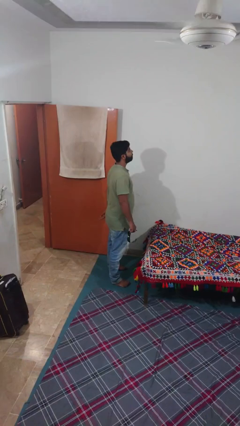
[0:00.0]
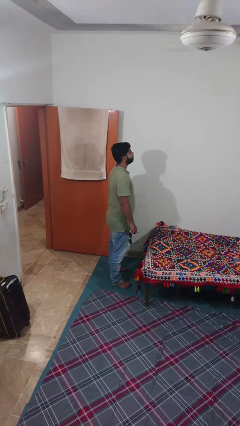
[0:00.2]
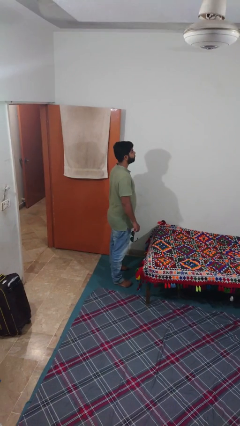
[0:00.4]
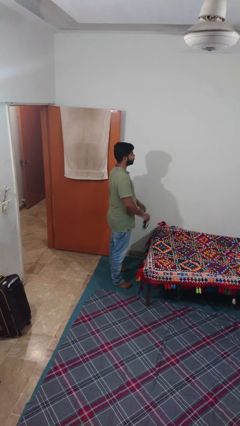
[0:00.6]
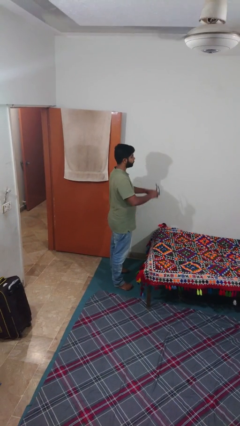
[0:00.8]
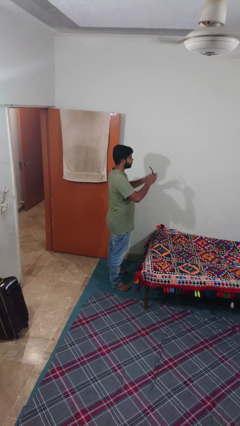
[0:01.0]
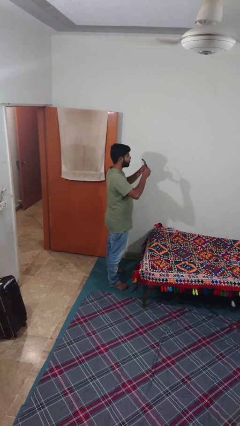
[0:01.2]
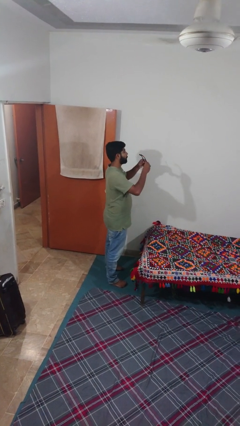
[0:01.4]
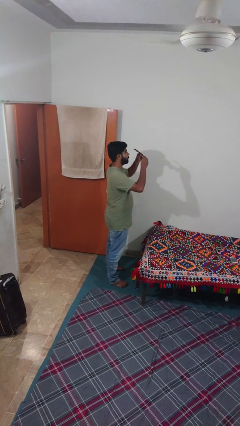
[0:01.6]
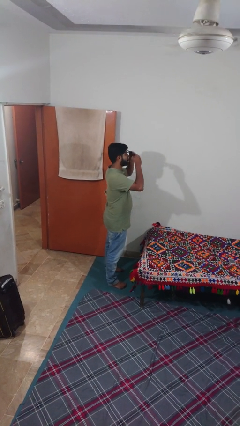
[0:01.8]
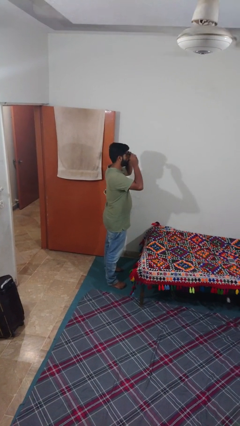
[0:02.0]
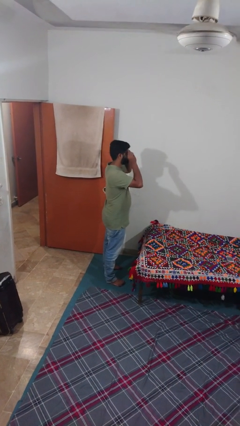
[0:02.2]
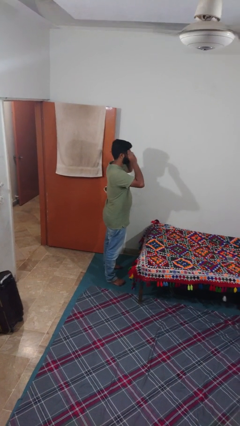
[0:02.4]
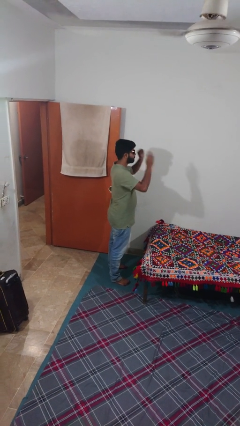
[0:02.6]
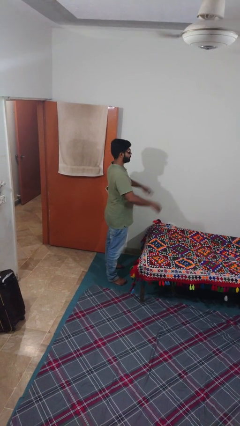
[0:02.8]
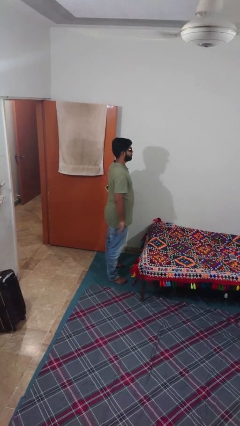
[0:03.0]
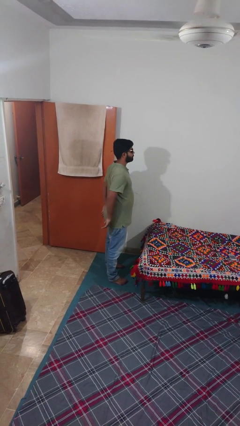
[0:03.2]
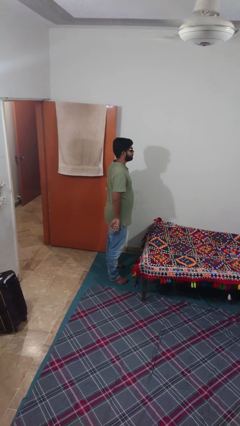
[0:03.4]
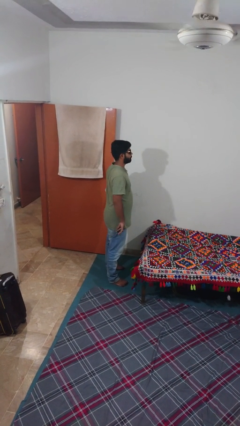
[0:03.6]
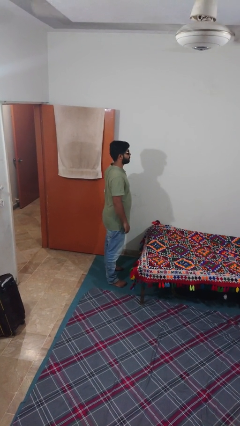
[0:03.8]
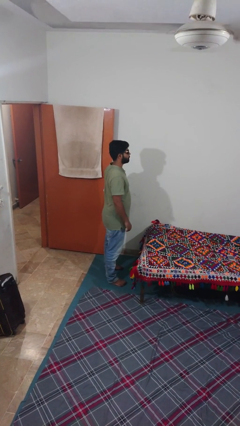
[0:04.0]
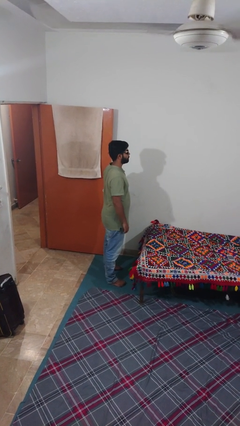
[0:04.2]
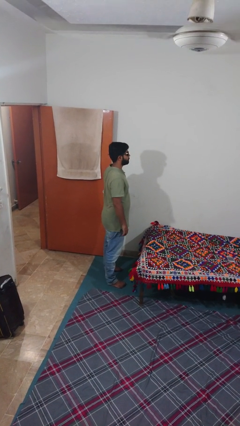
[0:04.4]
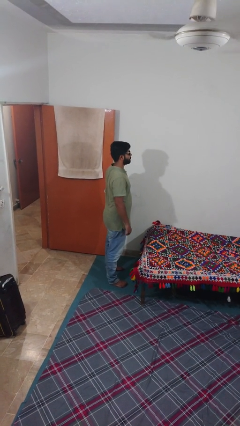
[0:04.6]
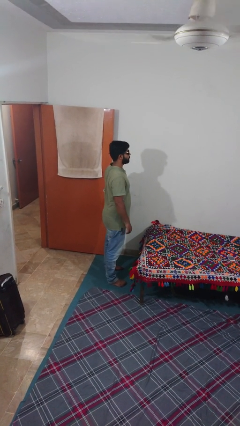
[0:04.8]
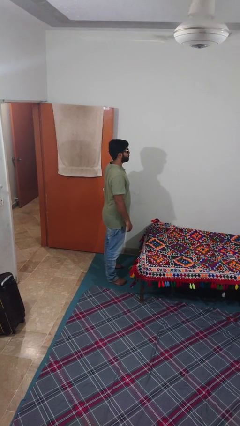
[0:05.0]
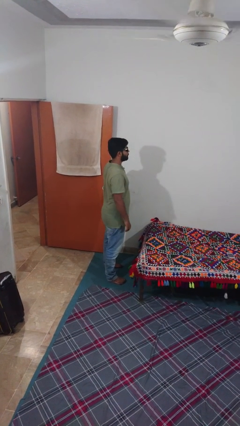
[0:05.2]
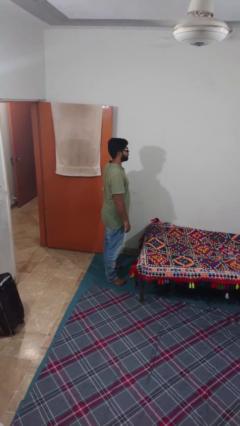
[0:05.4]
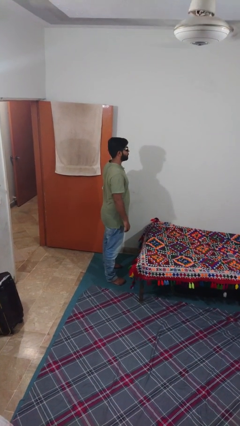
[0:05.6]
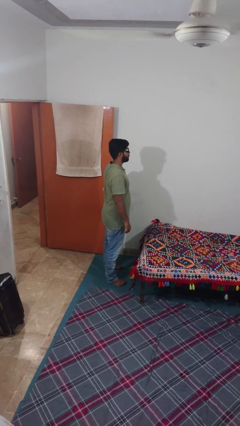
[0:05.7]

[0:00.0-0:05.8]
person puts on sunglasses

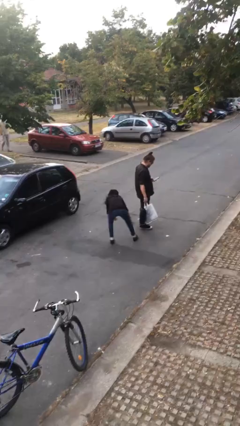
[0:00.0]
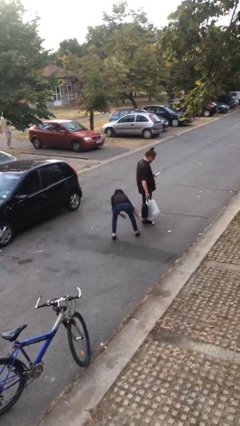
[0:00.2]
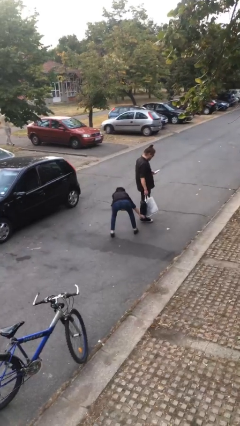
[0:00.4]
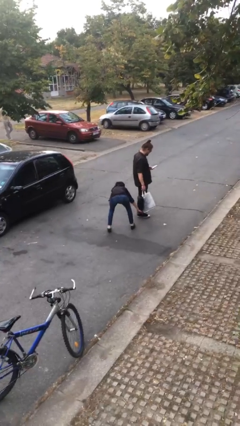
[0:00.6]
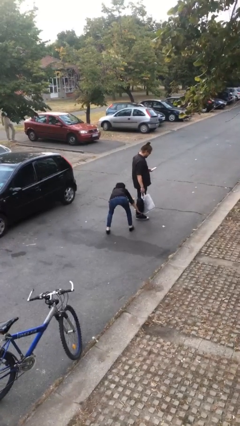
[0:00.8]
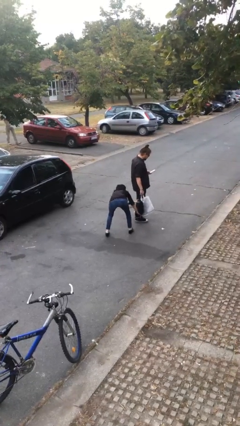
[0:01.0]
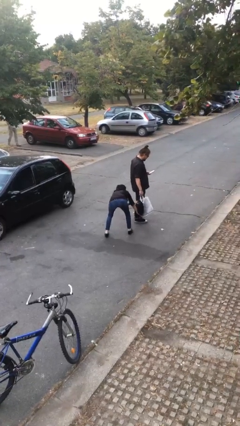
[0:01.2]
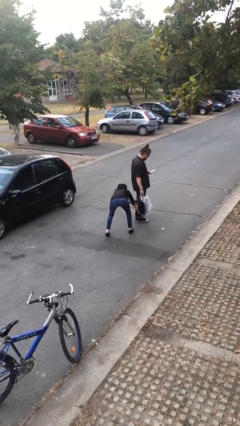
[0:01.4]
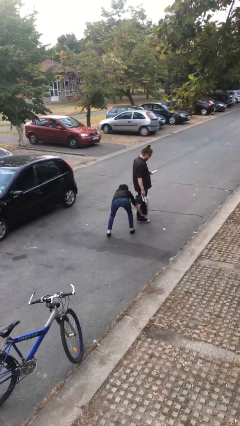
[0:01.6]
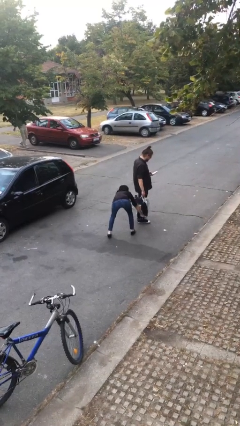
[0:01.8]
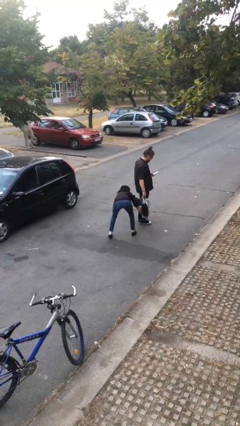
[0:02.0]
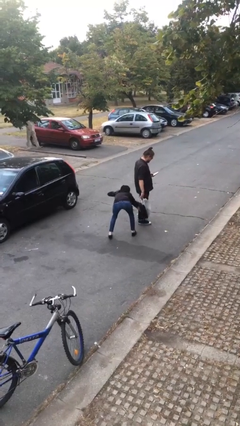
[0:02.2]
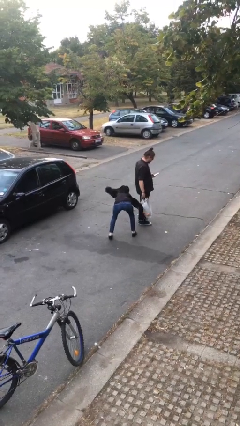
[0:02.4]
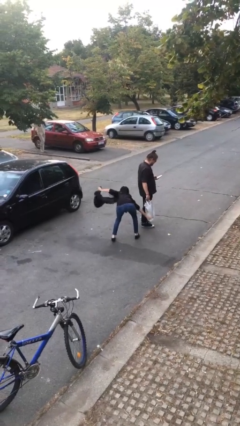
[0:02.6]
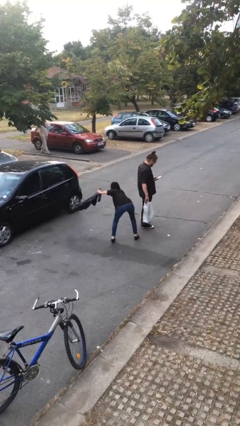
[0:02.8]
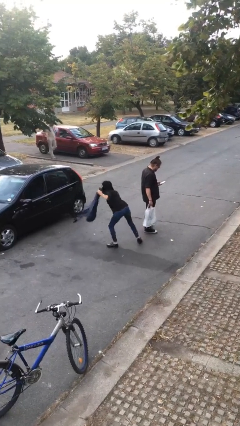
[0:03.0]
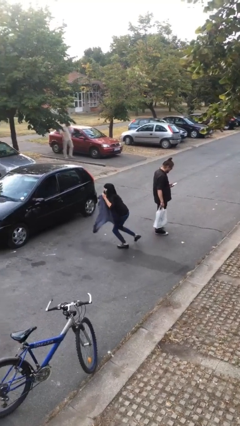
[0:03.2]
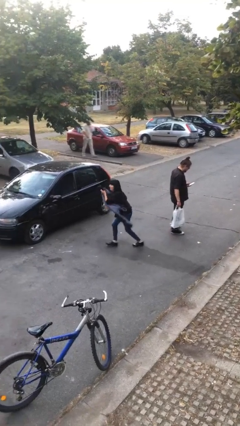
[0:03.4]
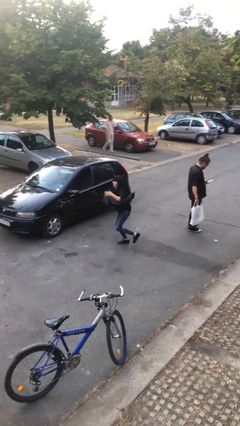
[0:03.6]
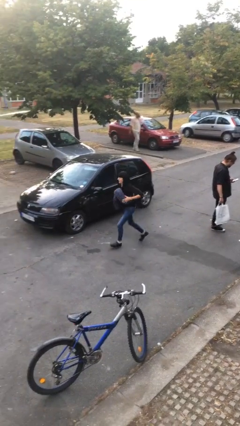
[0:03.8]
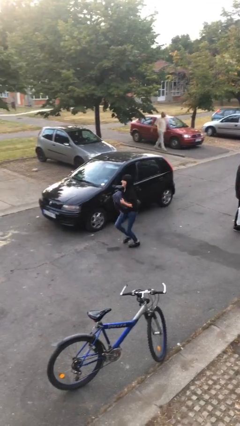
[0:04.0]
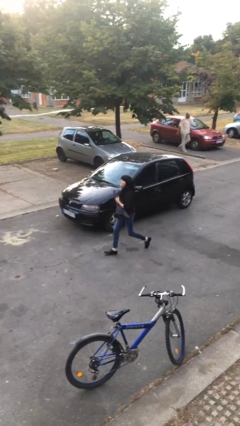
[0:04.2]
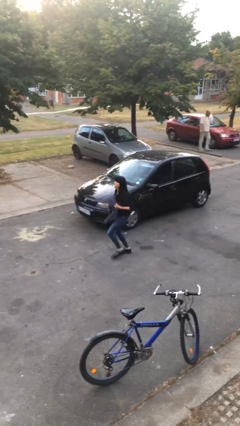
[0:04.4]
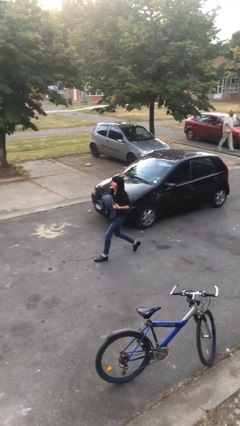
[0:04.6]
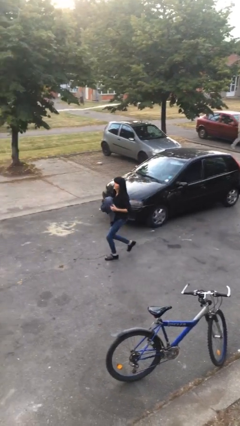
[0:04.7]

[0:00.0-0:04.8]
person steals object from person

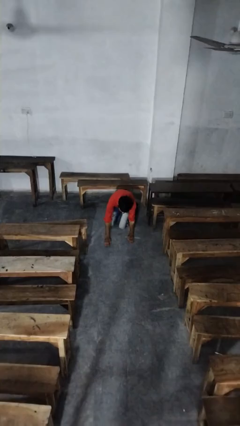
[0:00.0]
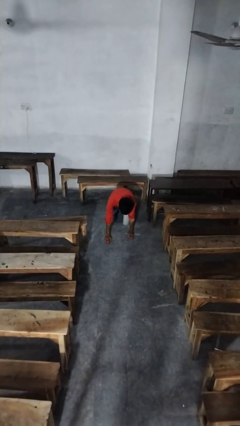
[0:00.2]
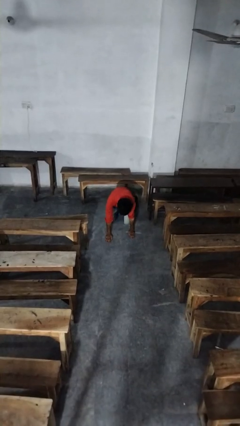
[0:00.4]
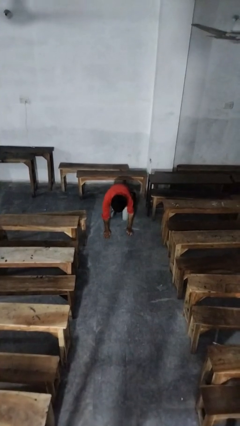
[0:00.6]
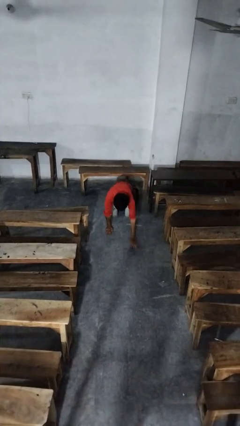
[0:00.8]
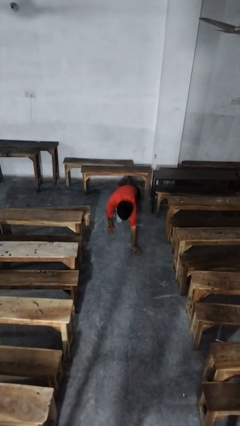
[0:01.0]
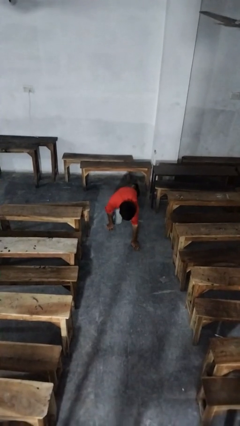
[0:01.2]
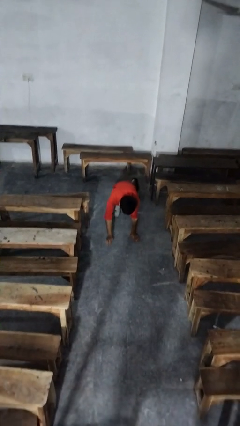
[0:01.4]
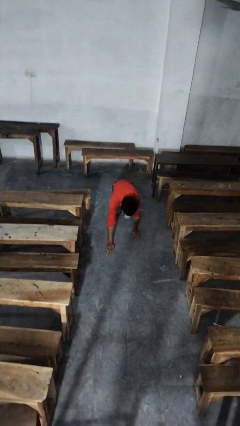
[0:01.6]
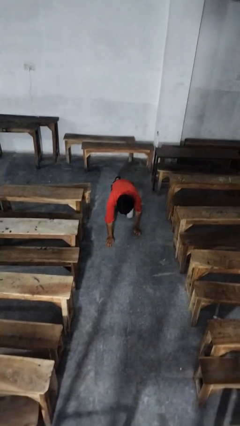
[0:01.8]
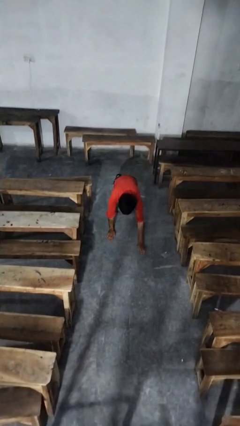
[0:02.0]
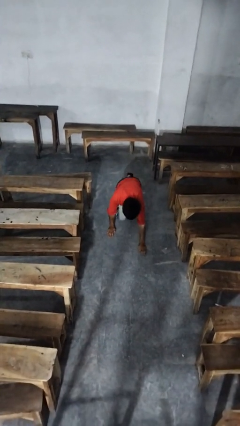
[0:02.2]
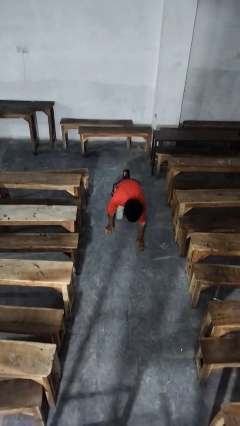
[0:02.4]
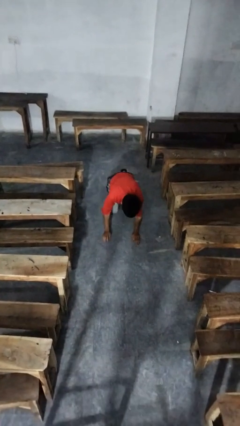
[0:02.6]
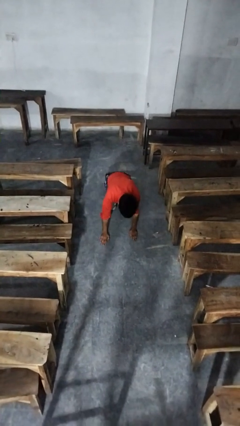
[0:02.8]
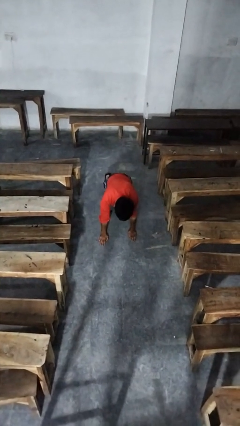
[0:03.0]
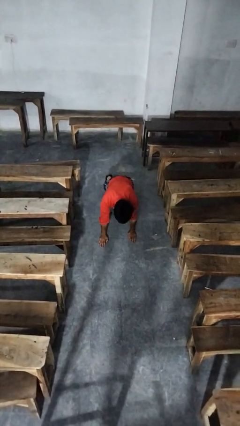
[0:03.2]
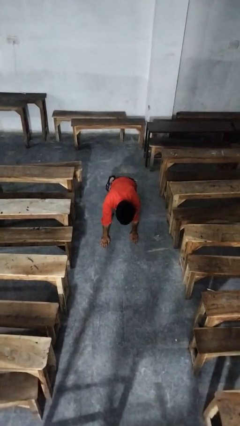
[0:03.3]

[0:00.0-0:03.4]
person crawls

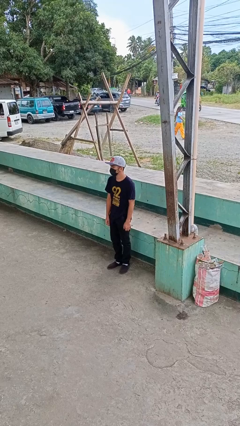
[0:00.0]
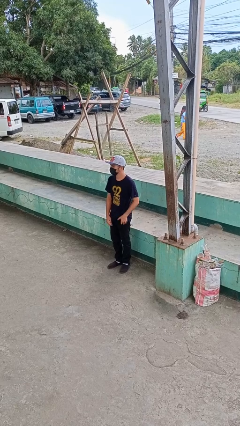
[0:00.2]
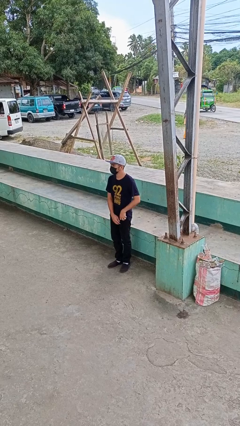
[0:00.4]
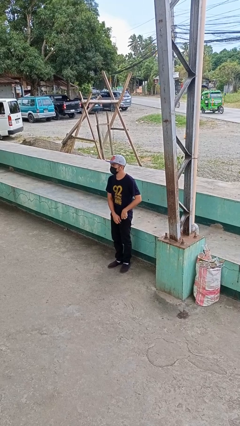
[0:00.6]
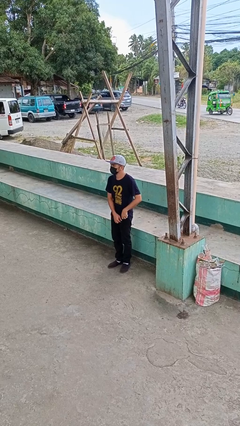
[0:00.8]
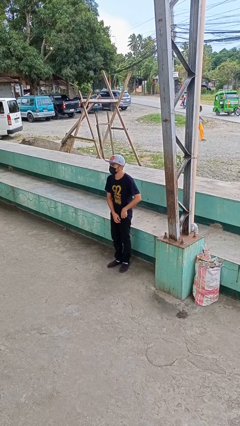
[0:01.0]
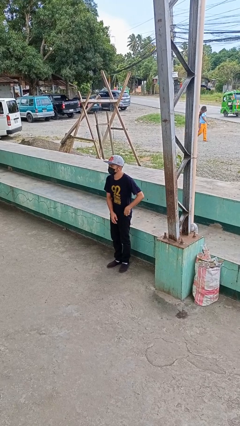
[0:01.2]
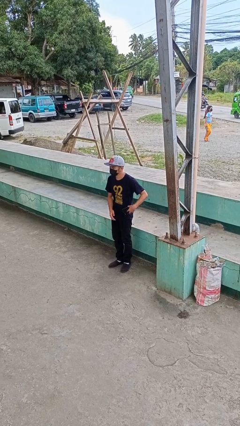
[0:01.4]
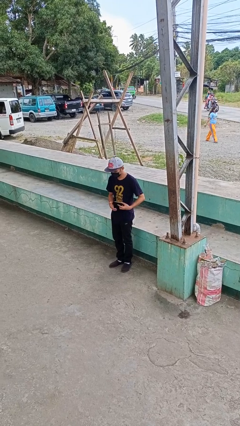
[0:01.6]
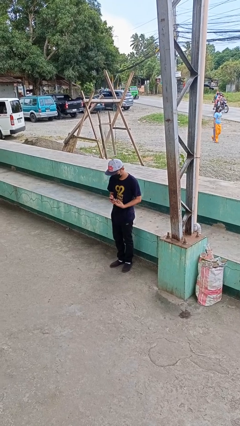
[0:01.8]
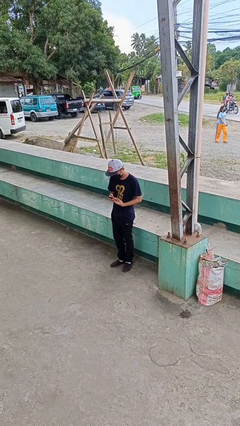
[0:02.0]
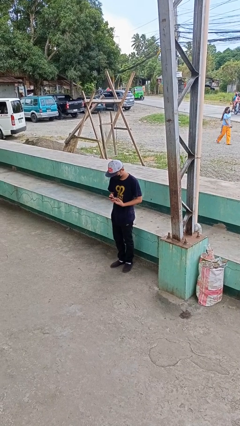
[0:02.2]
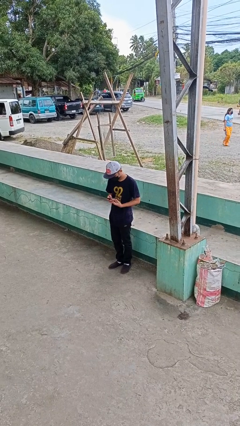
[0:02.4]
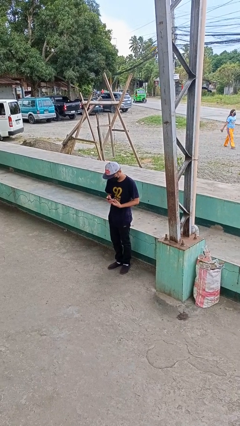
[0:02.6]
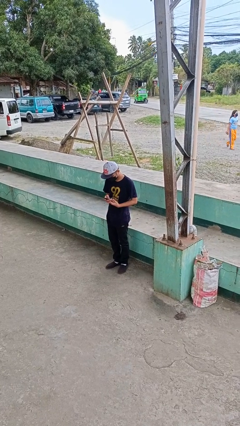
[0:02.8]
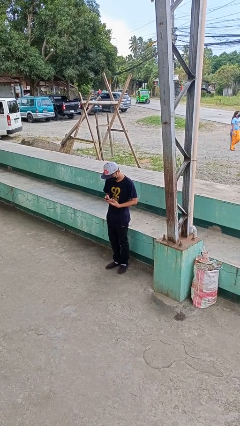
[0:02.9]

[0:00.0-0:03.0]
person takes phone from pocket

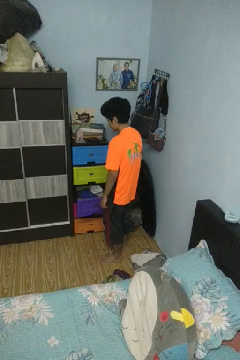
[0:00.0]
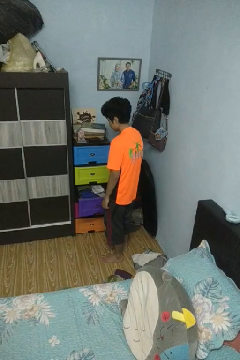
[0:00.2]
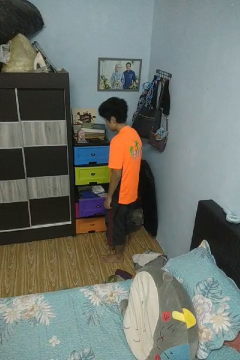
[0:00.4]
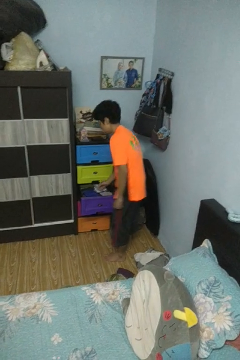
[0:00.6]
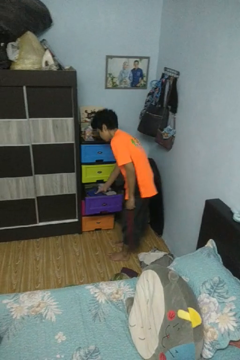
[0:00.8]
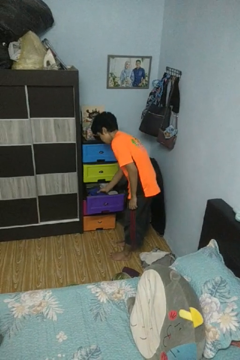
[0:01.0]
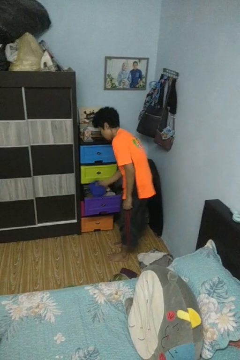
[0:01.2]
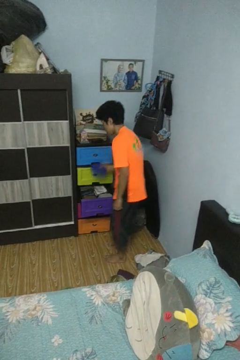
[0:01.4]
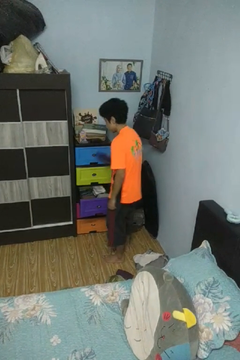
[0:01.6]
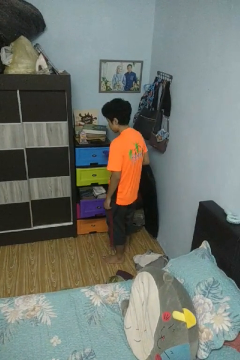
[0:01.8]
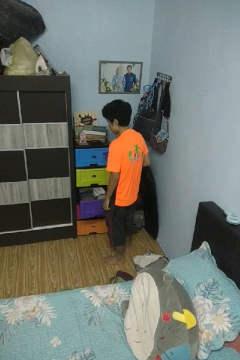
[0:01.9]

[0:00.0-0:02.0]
person takes clothes from dresser
